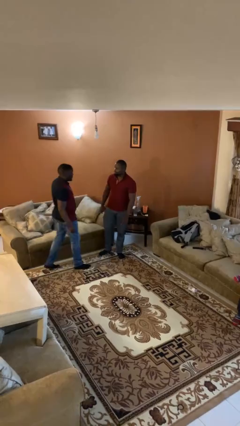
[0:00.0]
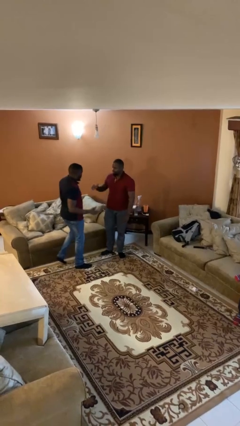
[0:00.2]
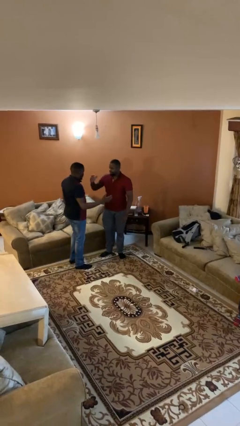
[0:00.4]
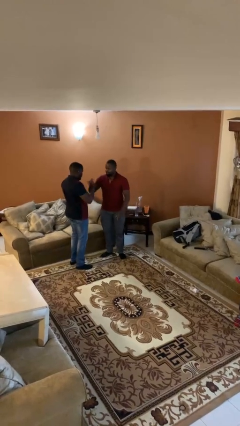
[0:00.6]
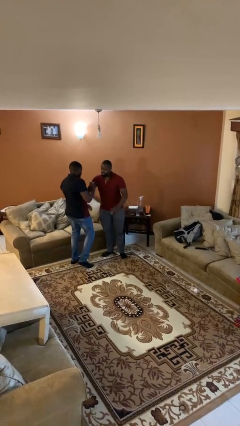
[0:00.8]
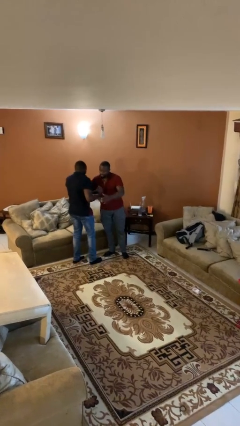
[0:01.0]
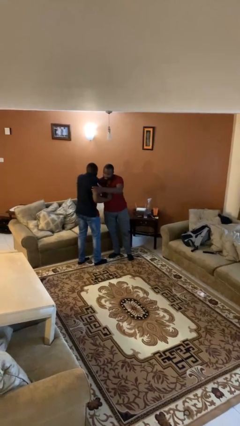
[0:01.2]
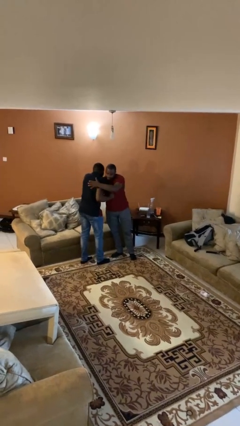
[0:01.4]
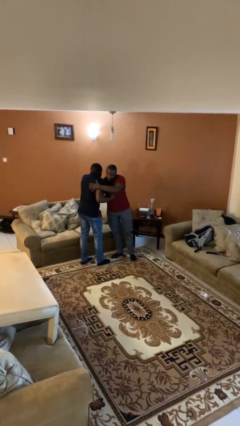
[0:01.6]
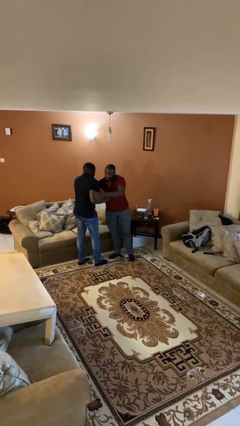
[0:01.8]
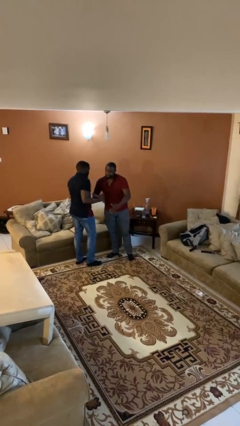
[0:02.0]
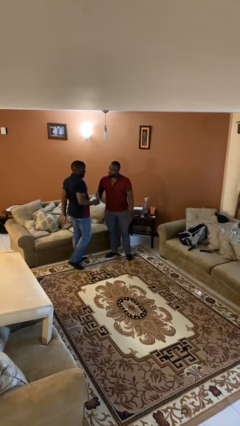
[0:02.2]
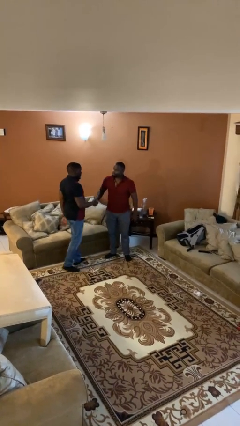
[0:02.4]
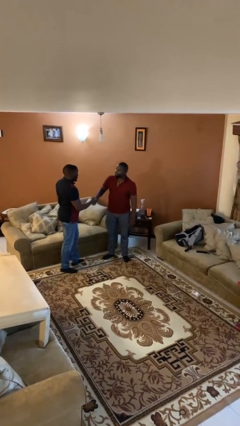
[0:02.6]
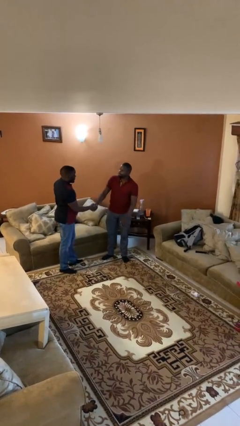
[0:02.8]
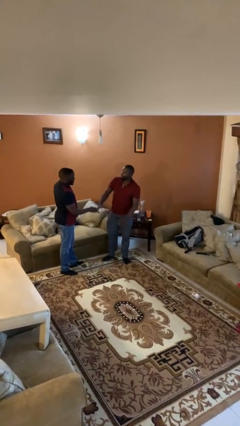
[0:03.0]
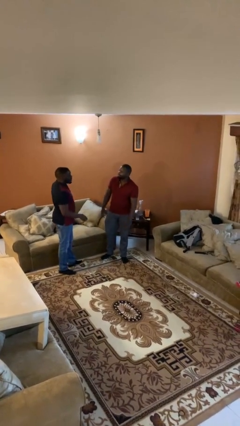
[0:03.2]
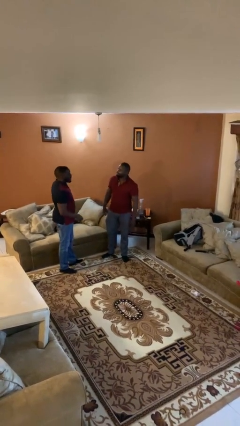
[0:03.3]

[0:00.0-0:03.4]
person embraces person

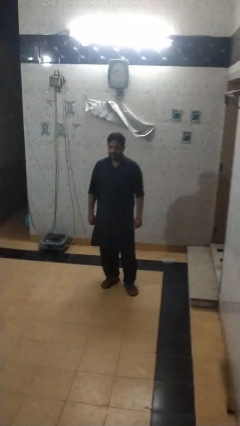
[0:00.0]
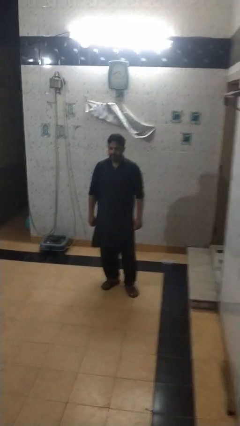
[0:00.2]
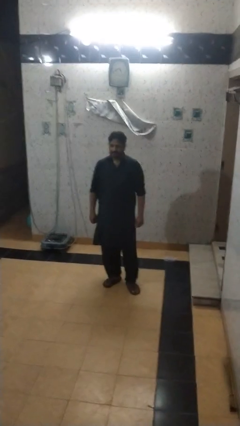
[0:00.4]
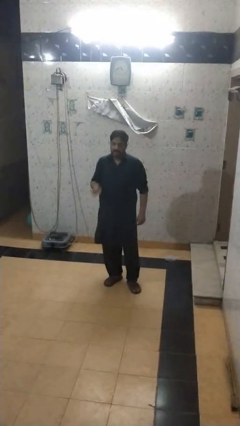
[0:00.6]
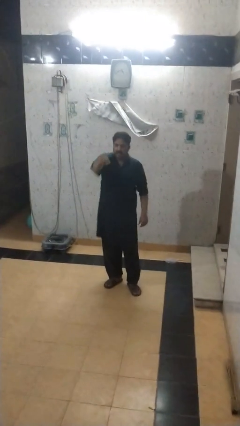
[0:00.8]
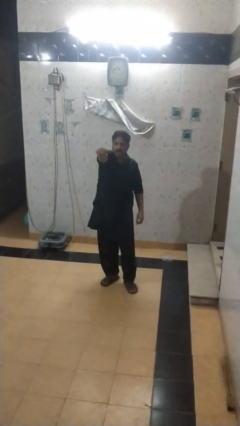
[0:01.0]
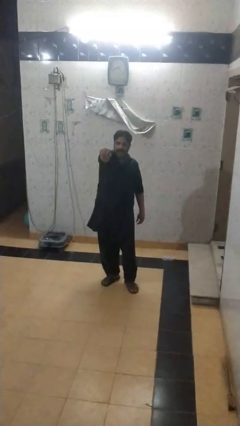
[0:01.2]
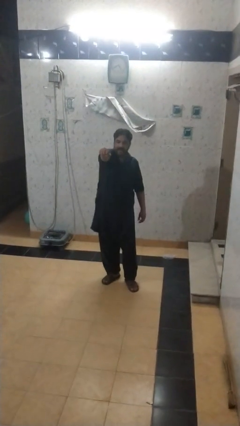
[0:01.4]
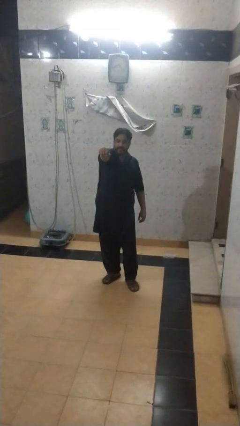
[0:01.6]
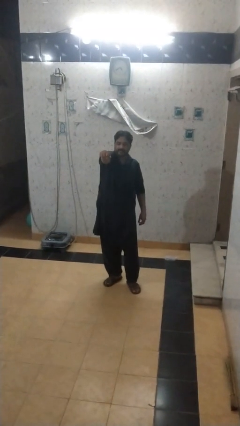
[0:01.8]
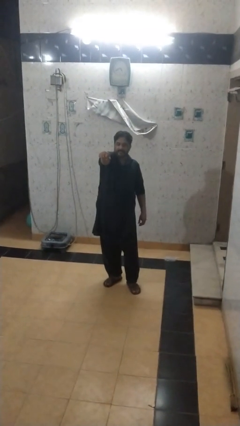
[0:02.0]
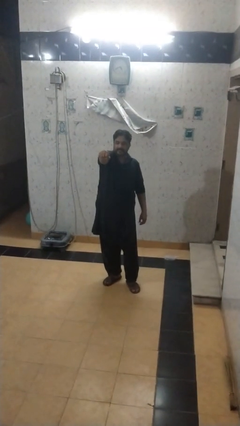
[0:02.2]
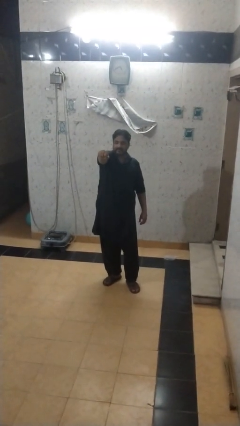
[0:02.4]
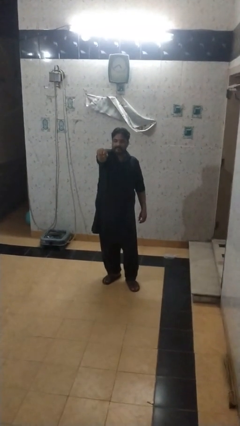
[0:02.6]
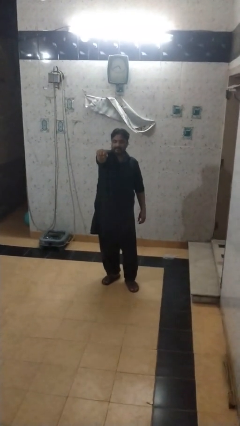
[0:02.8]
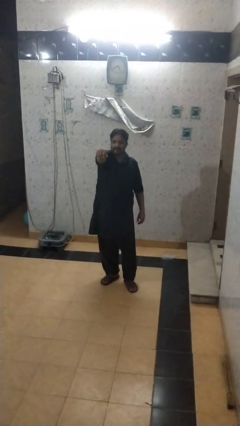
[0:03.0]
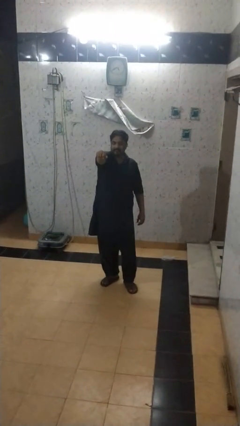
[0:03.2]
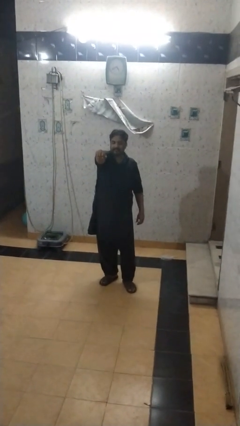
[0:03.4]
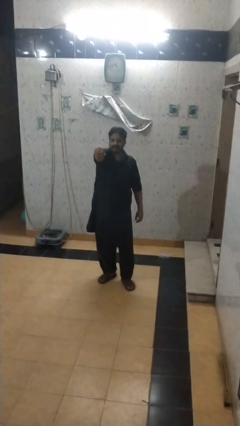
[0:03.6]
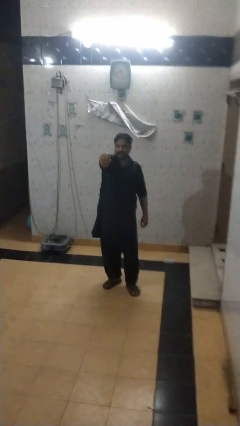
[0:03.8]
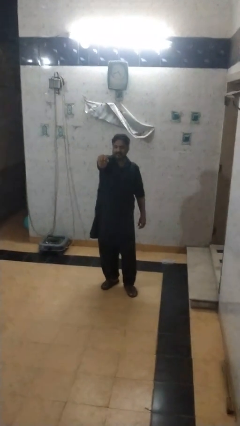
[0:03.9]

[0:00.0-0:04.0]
person punches

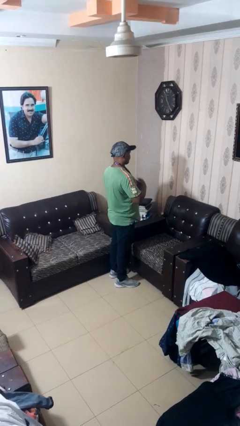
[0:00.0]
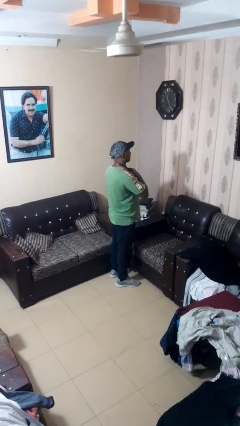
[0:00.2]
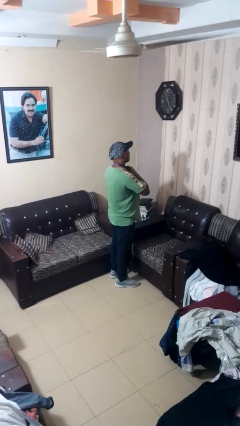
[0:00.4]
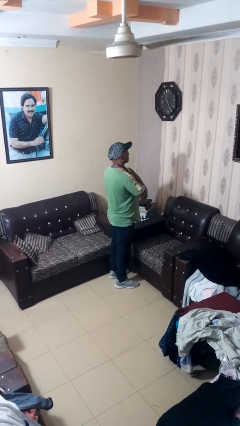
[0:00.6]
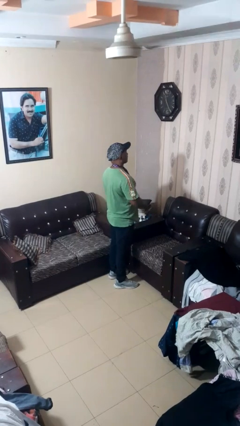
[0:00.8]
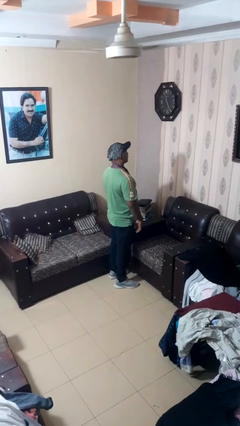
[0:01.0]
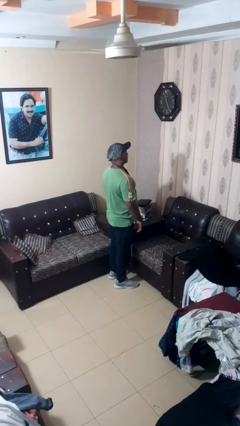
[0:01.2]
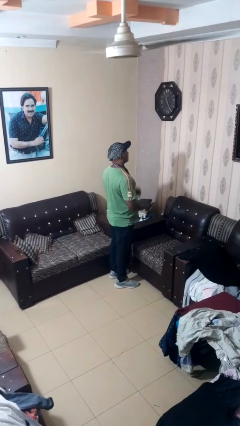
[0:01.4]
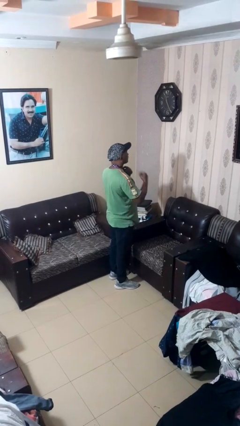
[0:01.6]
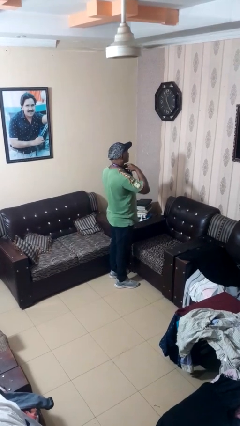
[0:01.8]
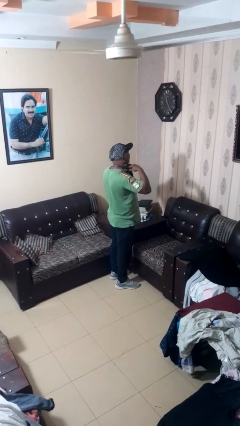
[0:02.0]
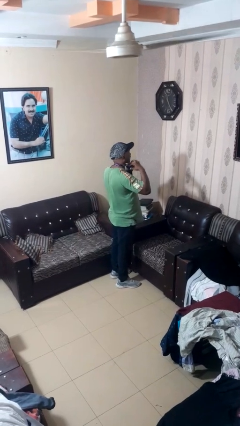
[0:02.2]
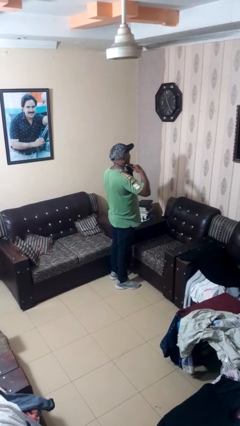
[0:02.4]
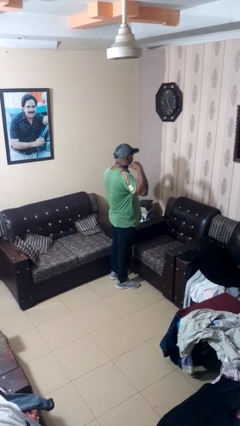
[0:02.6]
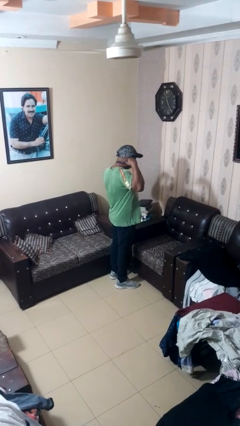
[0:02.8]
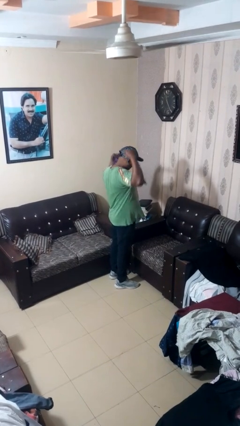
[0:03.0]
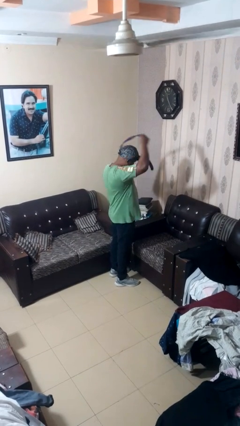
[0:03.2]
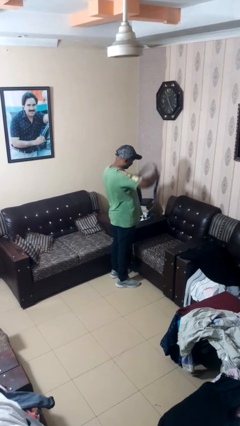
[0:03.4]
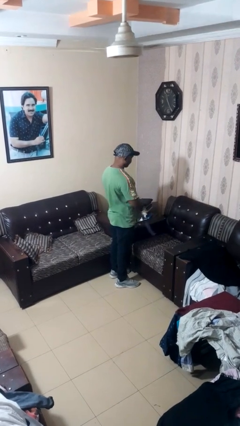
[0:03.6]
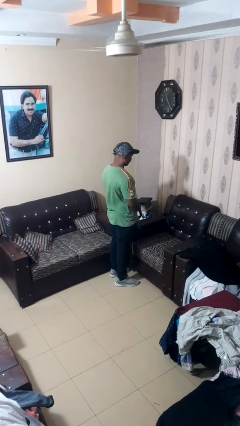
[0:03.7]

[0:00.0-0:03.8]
person takes off necktie

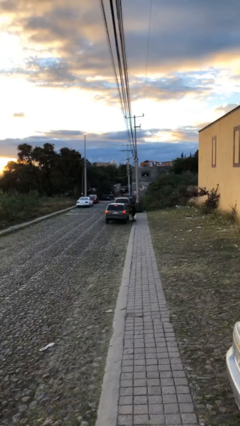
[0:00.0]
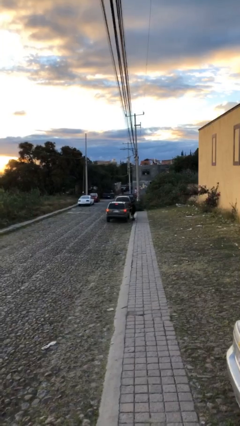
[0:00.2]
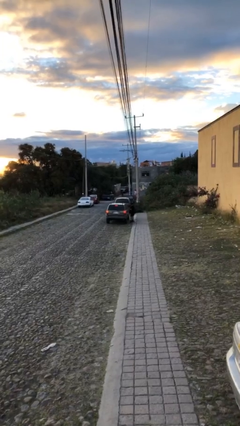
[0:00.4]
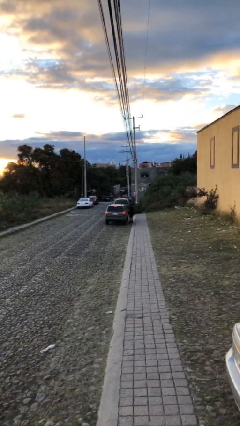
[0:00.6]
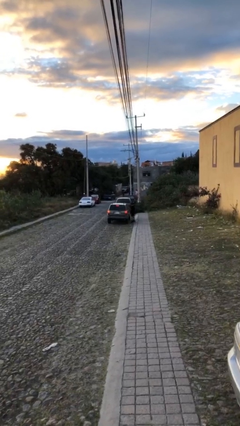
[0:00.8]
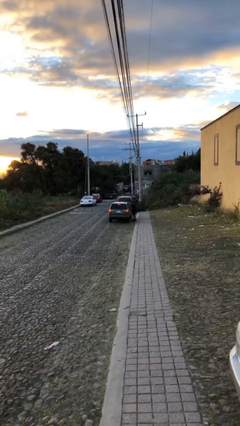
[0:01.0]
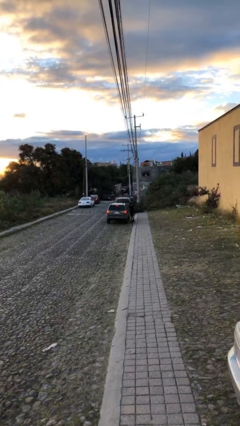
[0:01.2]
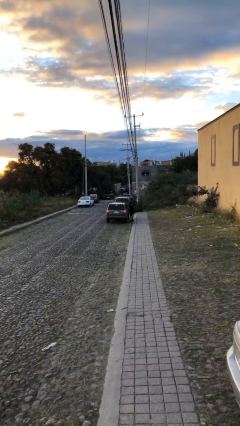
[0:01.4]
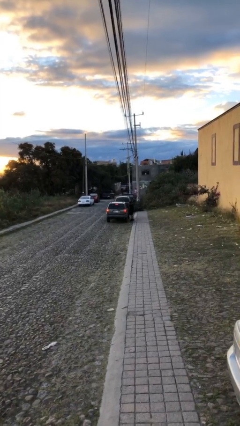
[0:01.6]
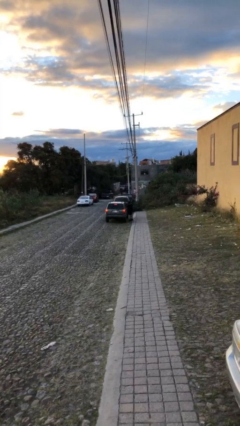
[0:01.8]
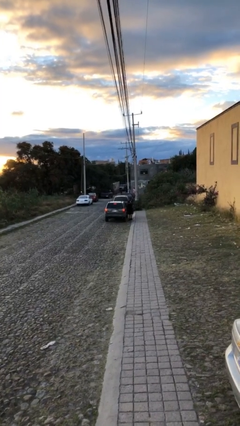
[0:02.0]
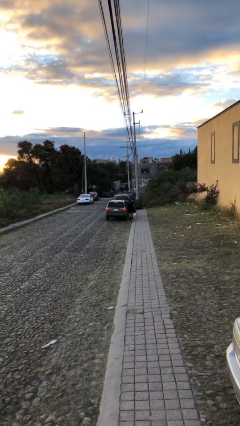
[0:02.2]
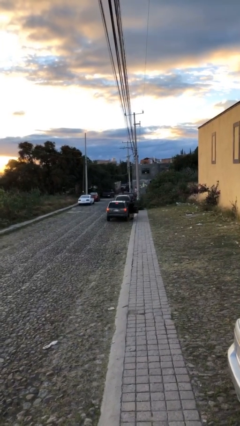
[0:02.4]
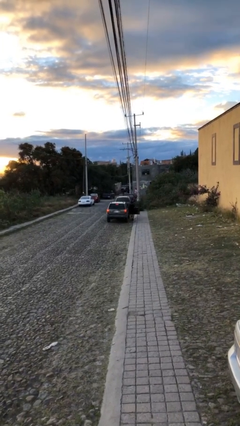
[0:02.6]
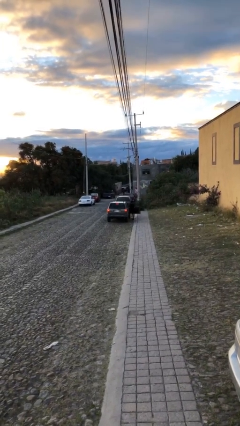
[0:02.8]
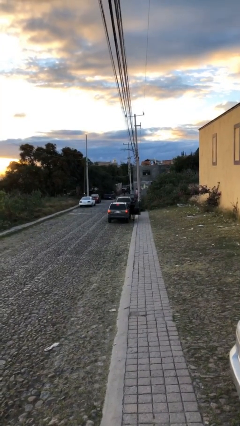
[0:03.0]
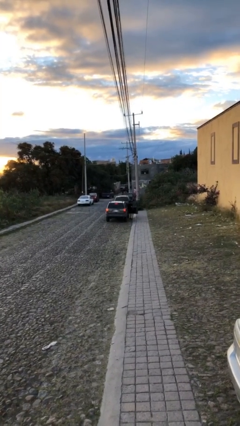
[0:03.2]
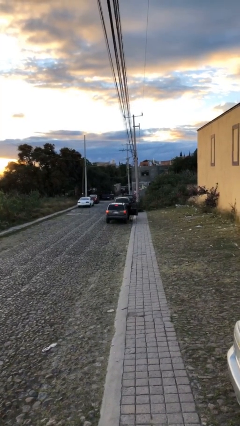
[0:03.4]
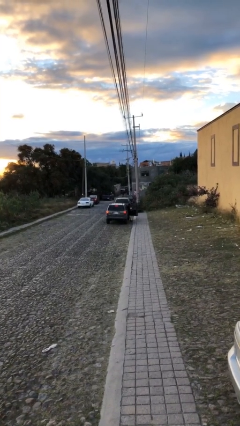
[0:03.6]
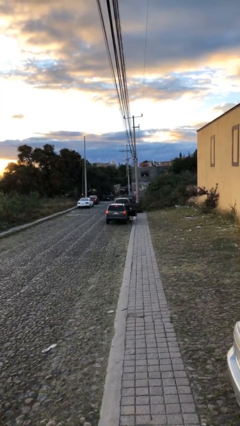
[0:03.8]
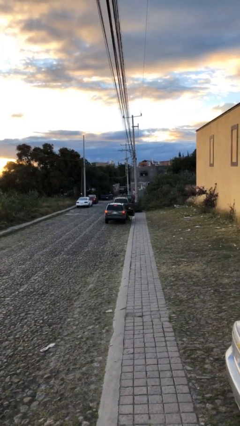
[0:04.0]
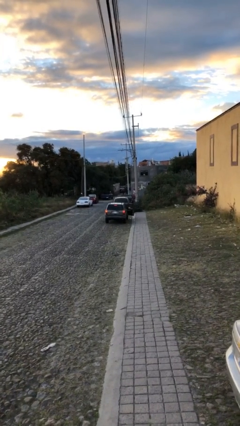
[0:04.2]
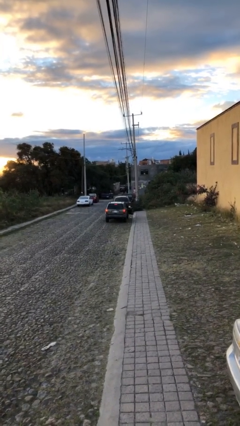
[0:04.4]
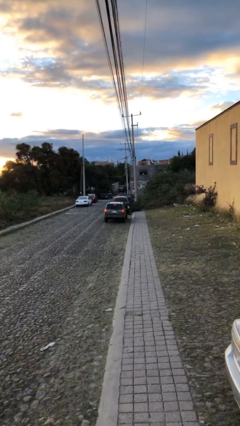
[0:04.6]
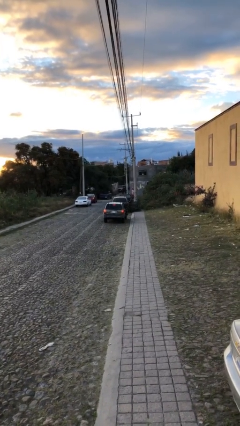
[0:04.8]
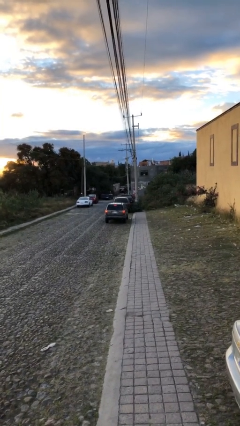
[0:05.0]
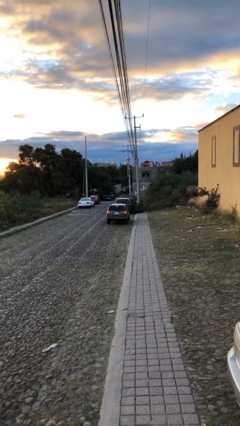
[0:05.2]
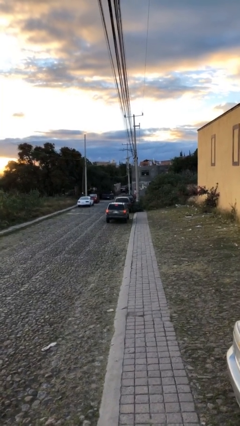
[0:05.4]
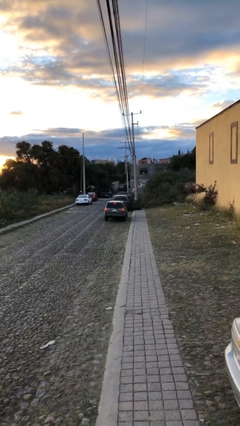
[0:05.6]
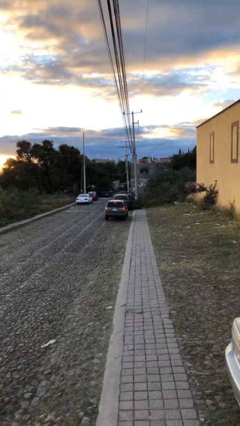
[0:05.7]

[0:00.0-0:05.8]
car picks up person

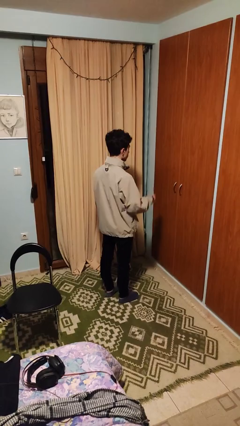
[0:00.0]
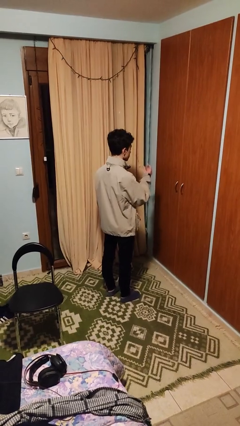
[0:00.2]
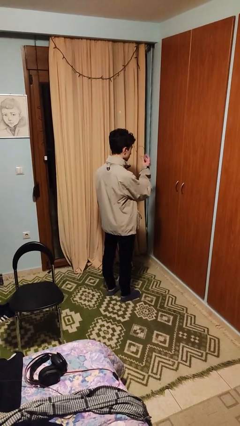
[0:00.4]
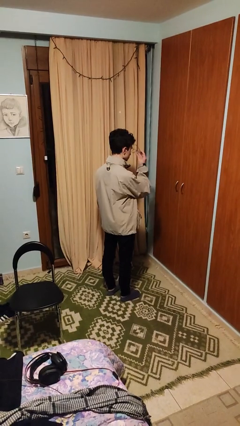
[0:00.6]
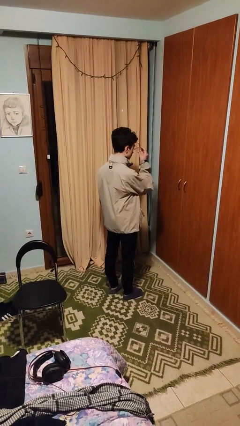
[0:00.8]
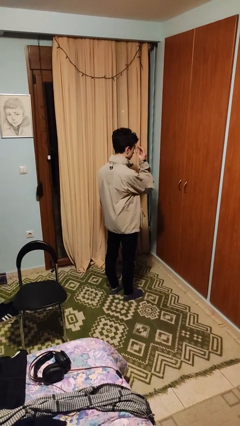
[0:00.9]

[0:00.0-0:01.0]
person puts on glasses
